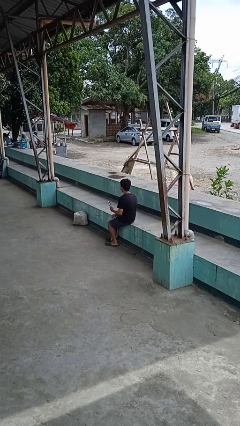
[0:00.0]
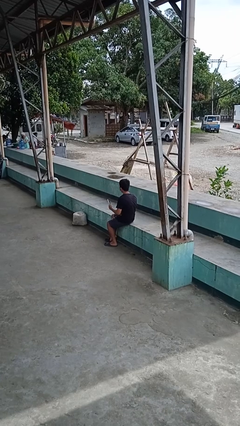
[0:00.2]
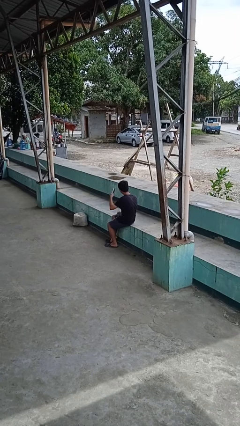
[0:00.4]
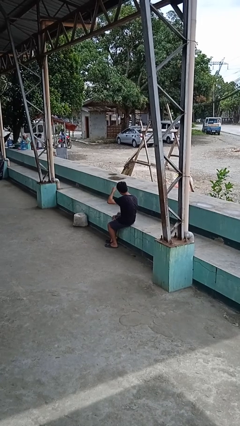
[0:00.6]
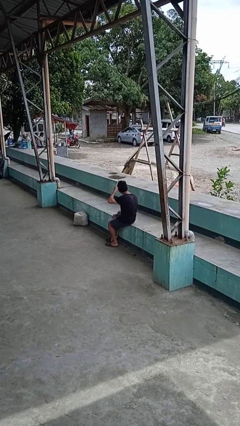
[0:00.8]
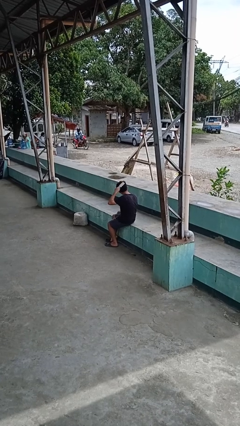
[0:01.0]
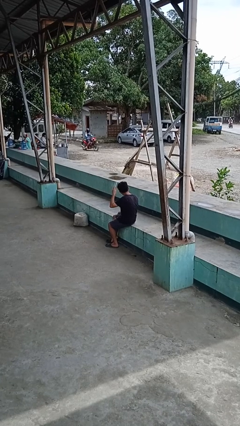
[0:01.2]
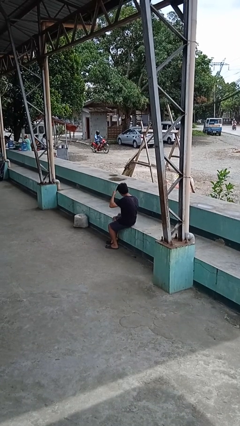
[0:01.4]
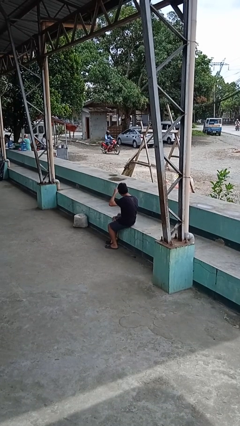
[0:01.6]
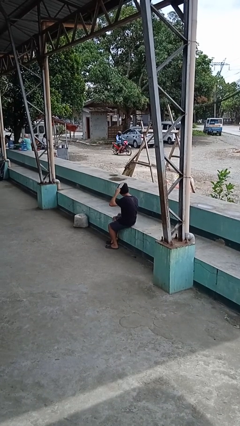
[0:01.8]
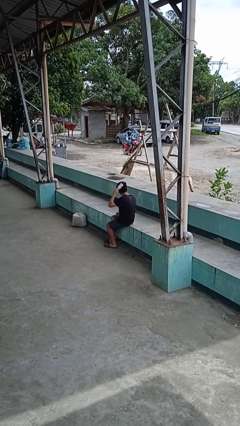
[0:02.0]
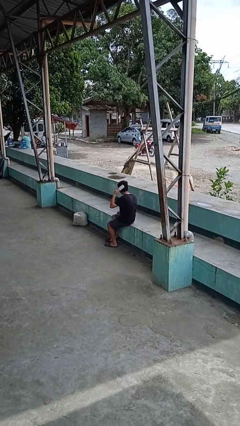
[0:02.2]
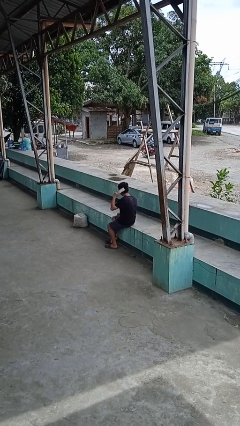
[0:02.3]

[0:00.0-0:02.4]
person brushes hair

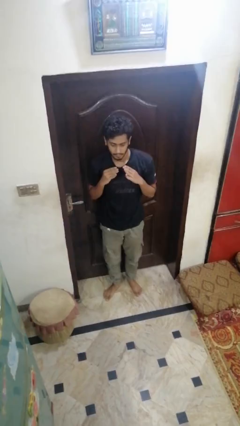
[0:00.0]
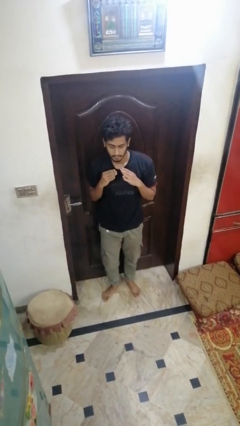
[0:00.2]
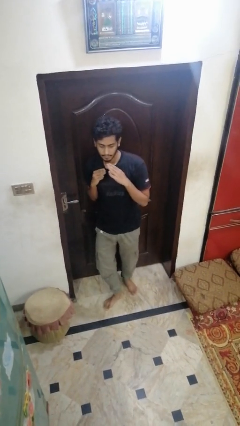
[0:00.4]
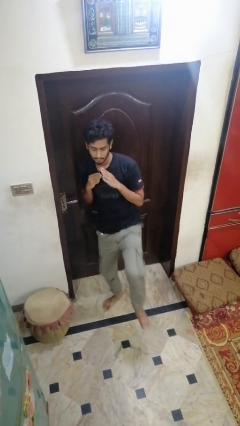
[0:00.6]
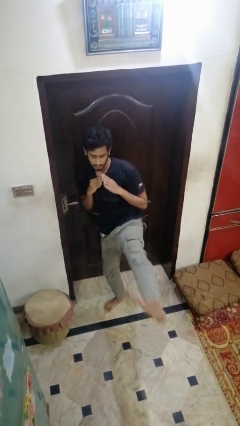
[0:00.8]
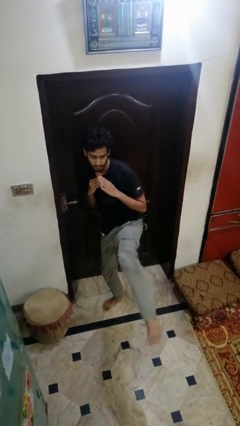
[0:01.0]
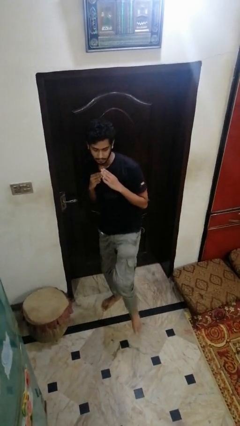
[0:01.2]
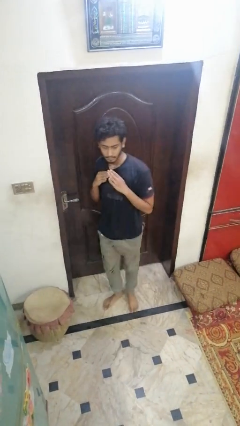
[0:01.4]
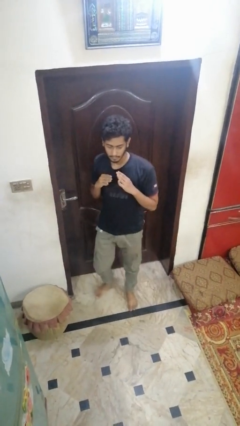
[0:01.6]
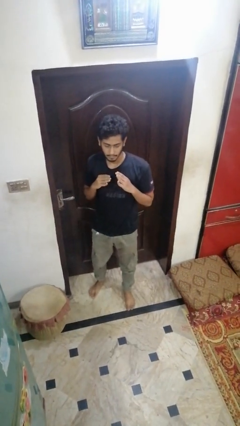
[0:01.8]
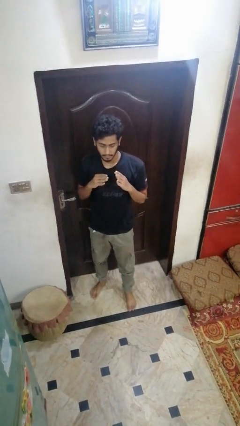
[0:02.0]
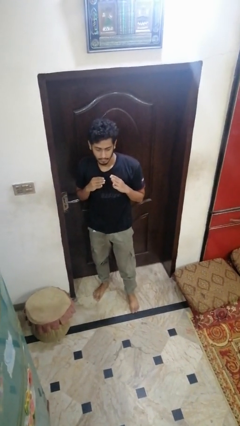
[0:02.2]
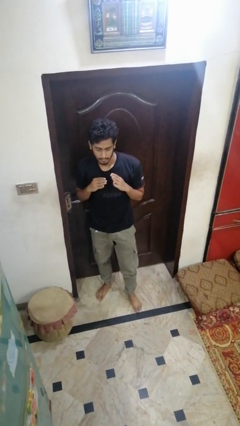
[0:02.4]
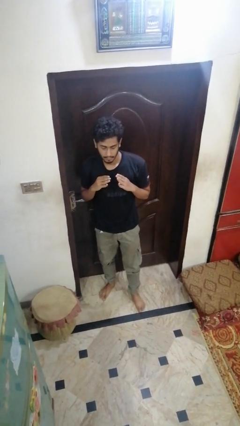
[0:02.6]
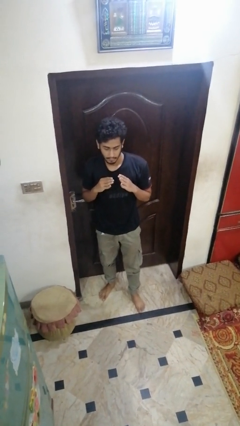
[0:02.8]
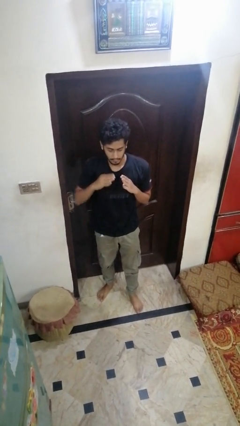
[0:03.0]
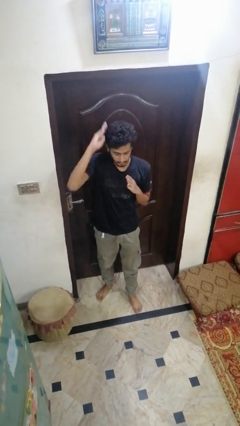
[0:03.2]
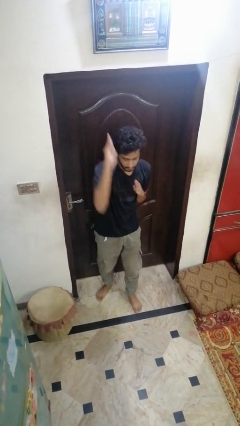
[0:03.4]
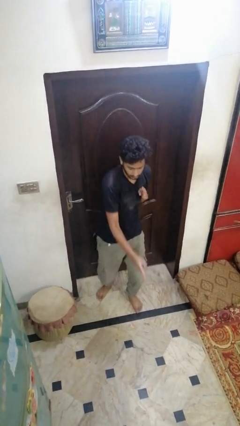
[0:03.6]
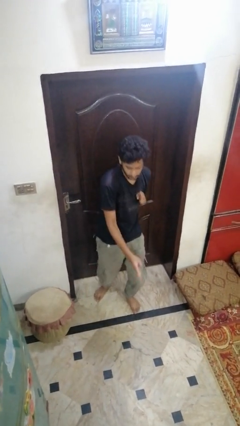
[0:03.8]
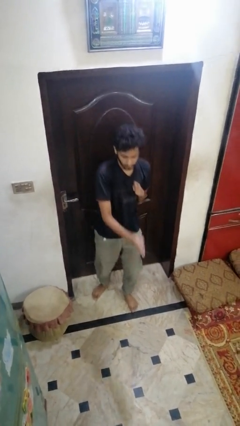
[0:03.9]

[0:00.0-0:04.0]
person flosses

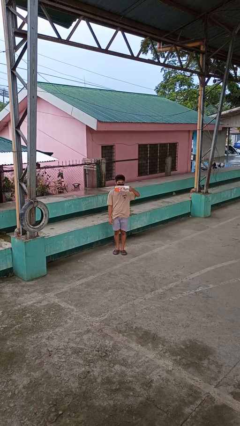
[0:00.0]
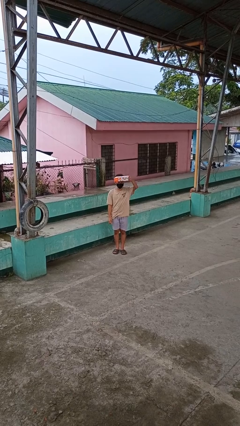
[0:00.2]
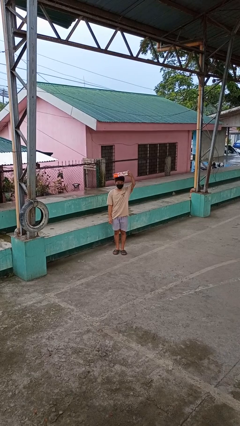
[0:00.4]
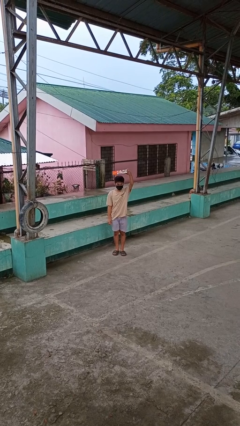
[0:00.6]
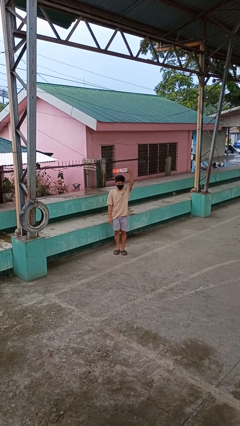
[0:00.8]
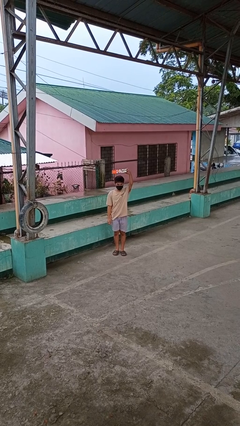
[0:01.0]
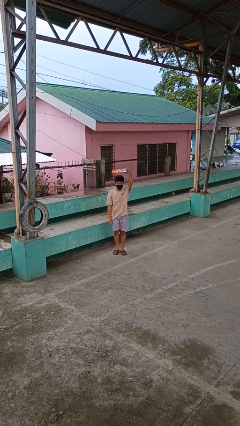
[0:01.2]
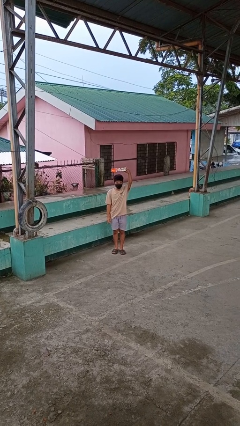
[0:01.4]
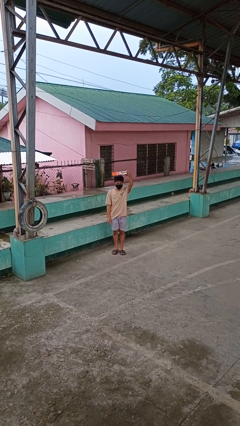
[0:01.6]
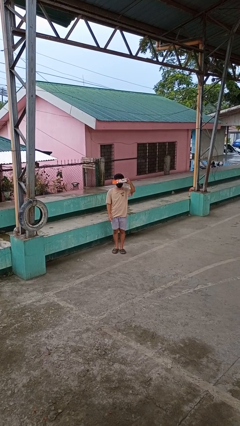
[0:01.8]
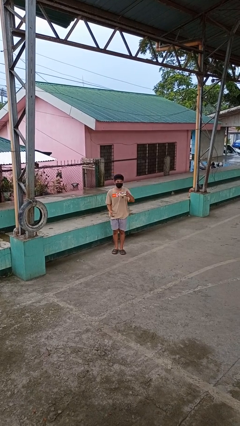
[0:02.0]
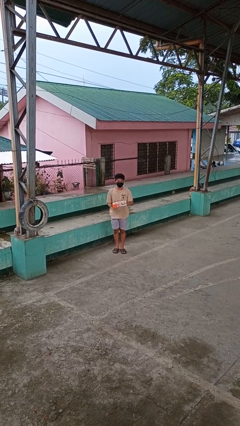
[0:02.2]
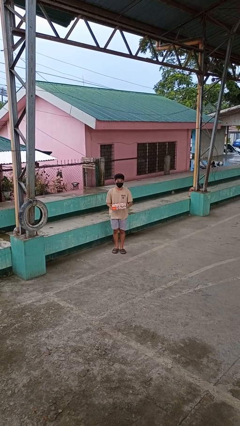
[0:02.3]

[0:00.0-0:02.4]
person holds object above head

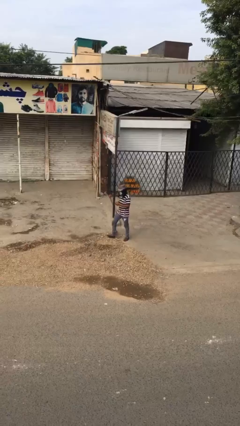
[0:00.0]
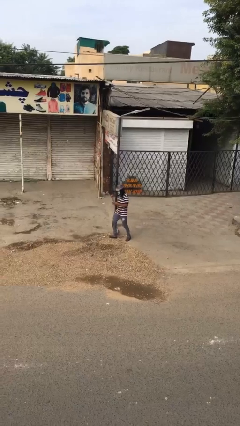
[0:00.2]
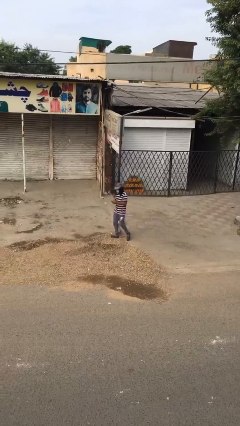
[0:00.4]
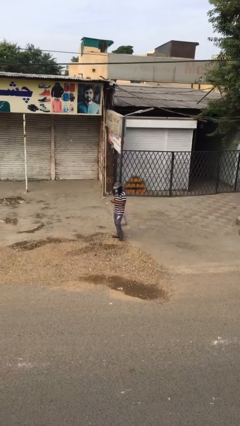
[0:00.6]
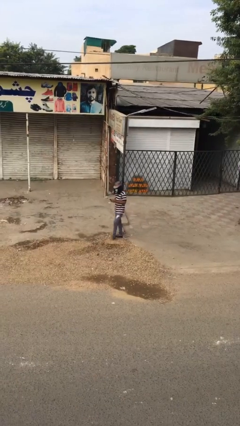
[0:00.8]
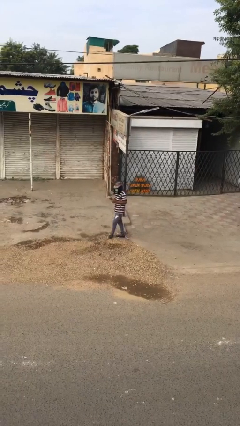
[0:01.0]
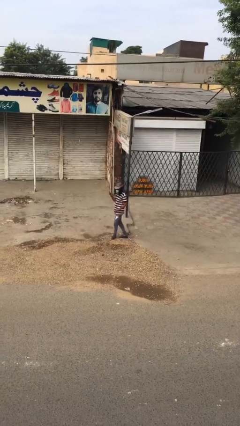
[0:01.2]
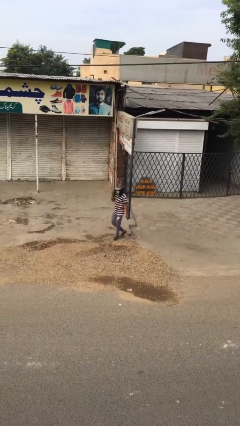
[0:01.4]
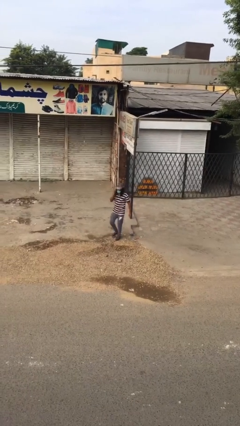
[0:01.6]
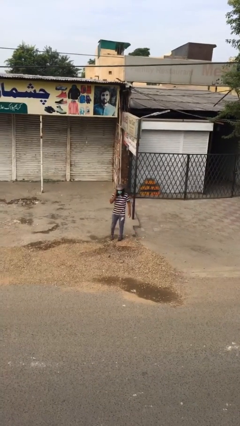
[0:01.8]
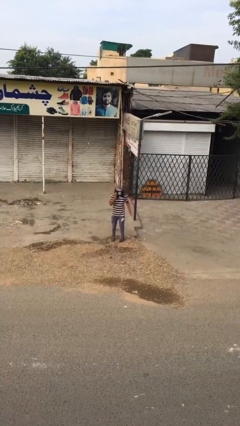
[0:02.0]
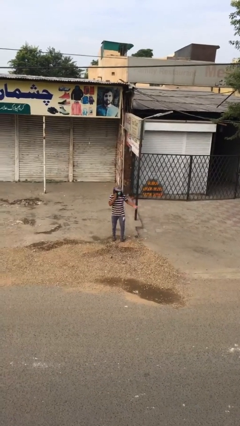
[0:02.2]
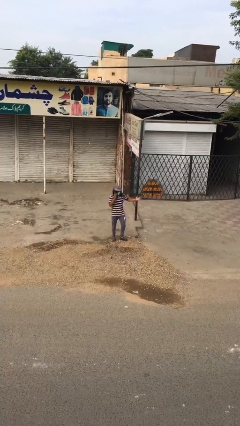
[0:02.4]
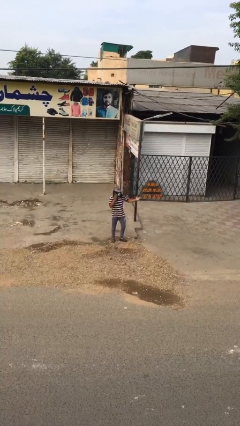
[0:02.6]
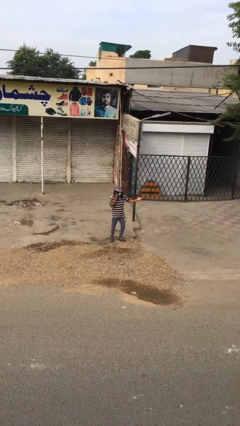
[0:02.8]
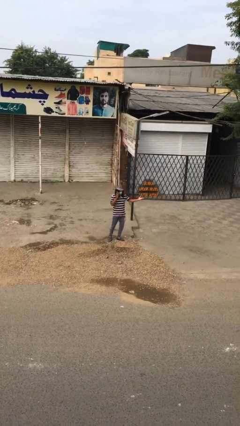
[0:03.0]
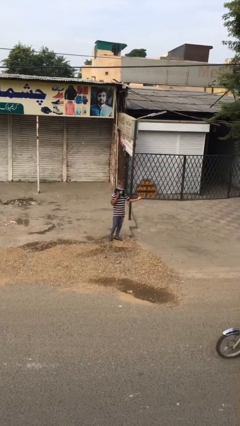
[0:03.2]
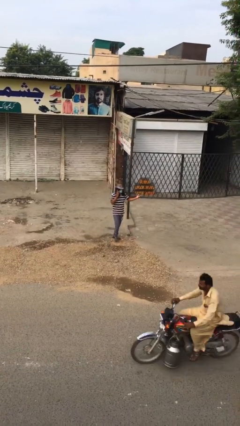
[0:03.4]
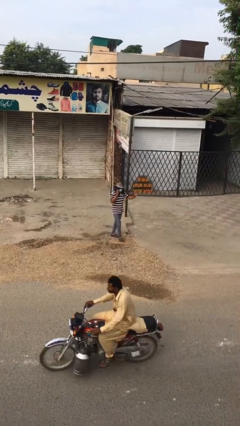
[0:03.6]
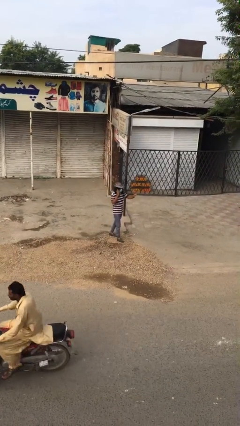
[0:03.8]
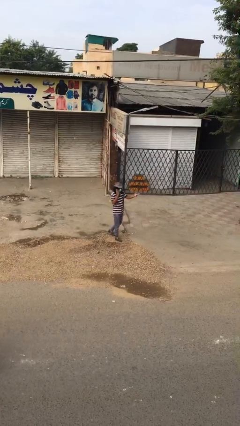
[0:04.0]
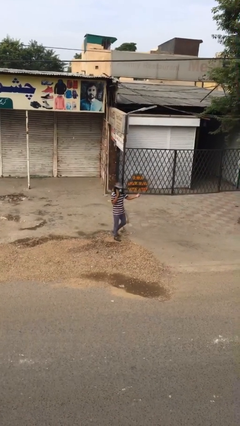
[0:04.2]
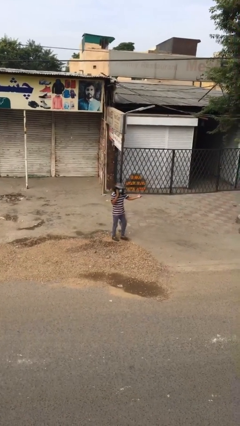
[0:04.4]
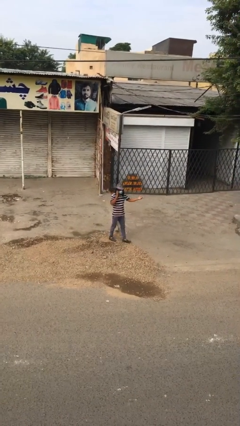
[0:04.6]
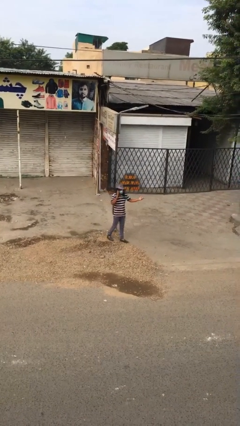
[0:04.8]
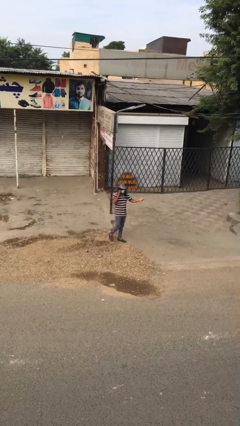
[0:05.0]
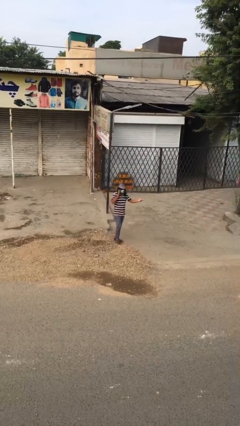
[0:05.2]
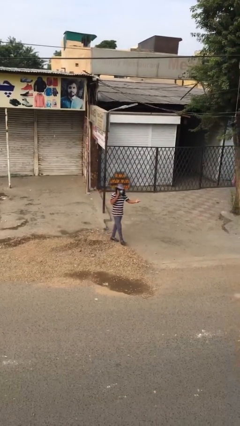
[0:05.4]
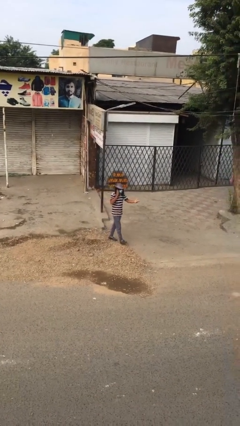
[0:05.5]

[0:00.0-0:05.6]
person talks on phone

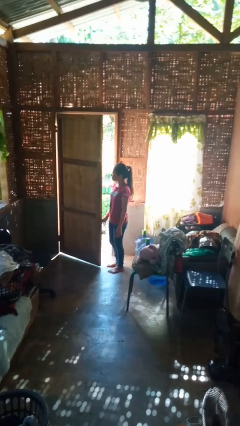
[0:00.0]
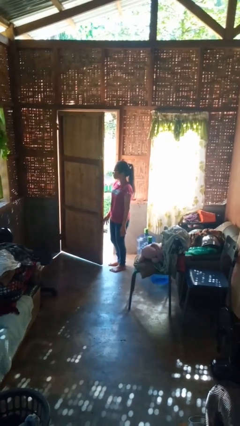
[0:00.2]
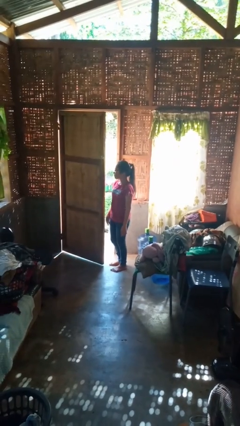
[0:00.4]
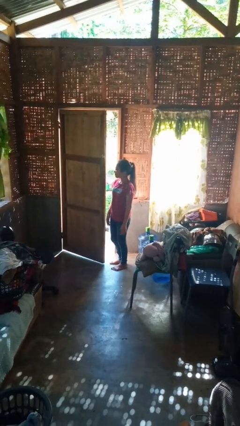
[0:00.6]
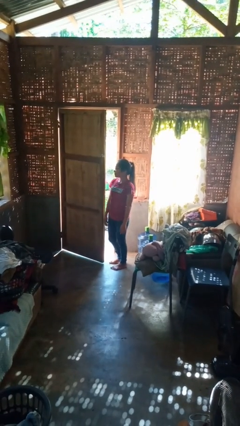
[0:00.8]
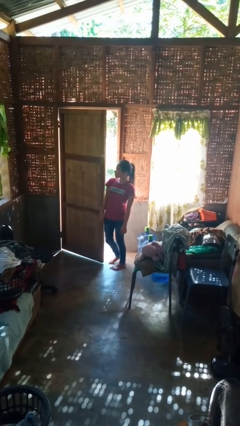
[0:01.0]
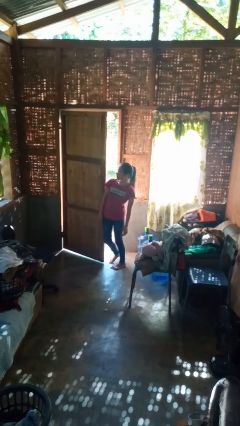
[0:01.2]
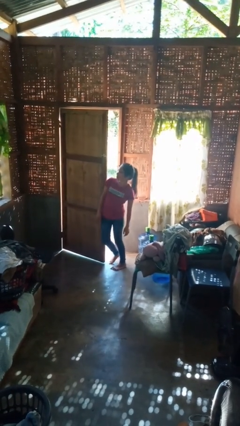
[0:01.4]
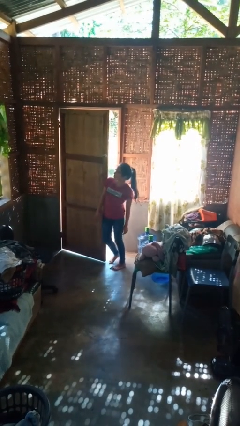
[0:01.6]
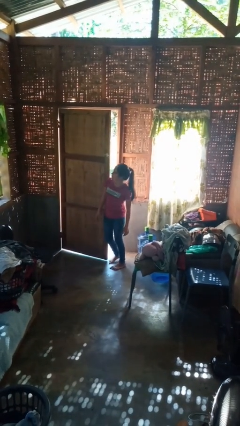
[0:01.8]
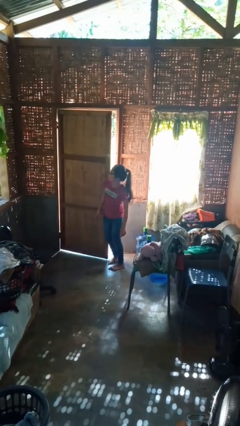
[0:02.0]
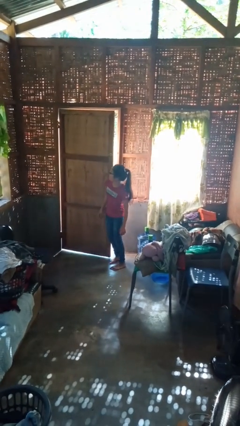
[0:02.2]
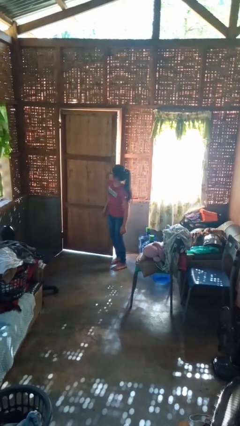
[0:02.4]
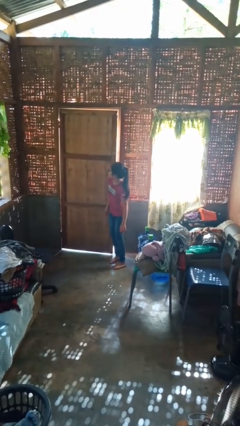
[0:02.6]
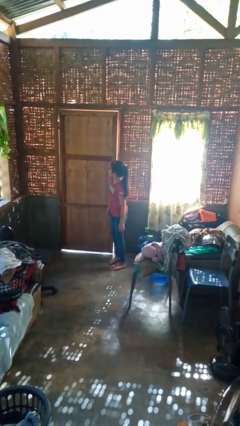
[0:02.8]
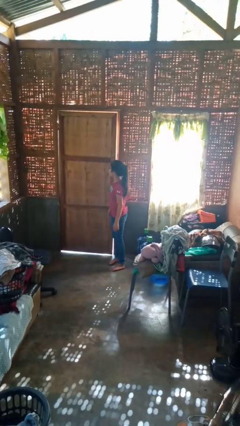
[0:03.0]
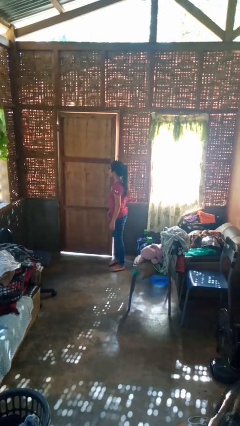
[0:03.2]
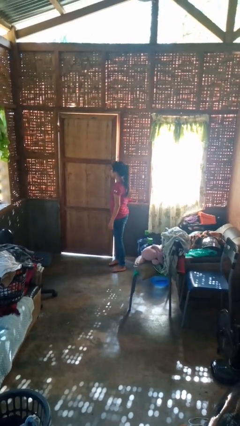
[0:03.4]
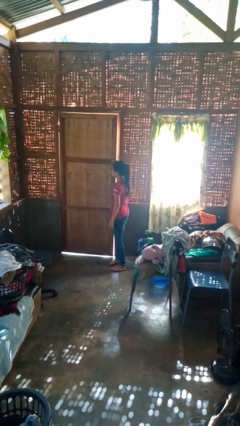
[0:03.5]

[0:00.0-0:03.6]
person closes door with hip
